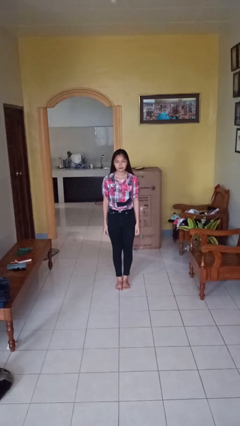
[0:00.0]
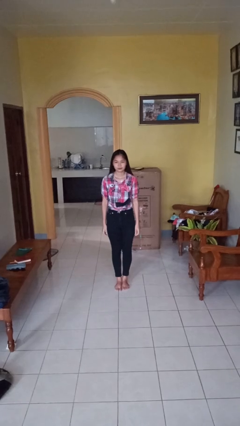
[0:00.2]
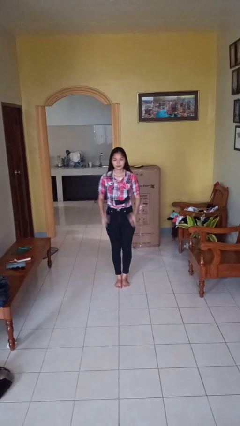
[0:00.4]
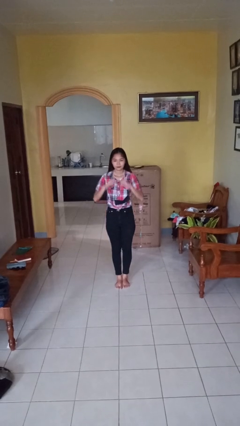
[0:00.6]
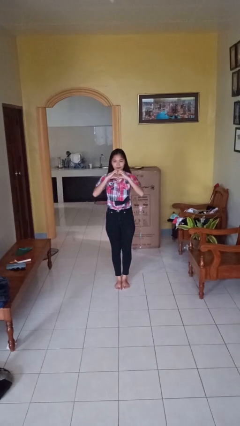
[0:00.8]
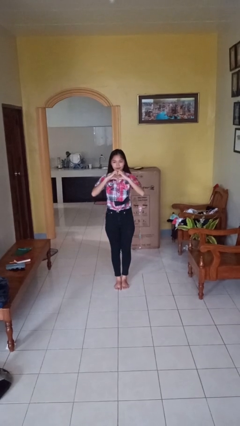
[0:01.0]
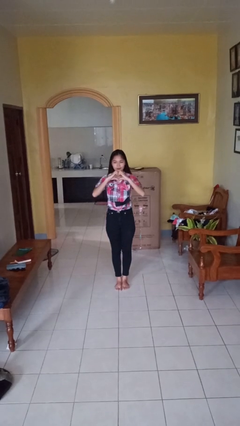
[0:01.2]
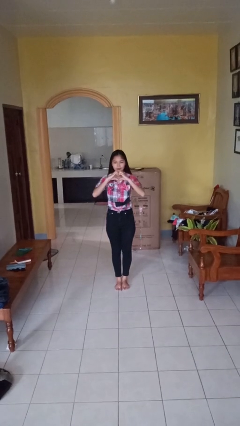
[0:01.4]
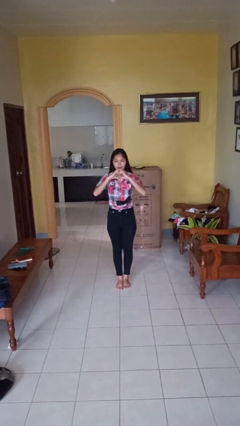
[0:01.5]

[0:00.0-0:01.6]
person gestures heart

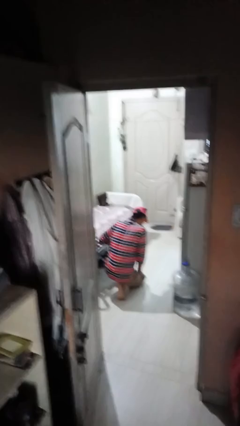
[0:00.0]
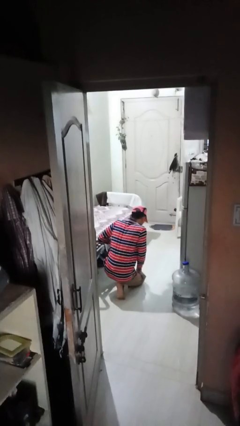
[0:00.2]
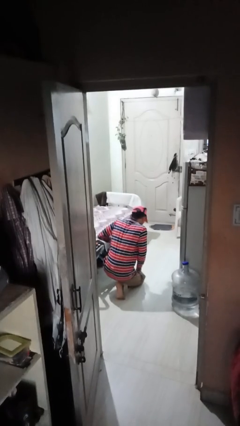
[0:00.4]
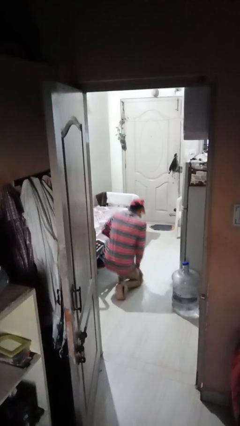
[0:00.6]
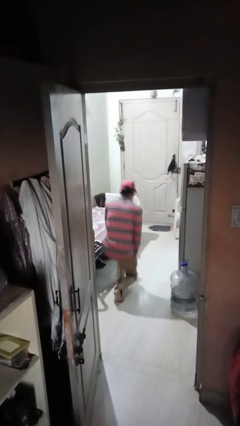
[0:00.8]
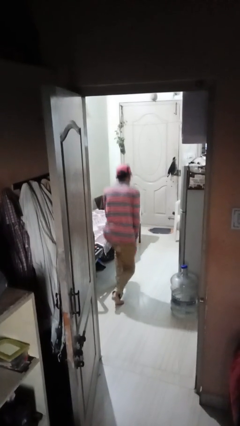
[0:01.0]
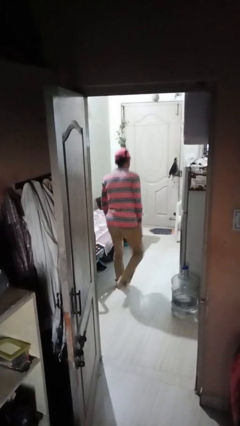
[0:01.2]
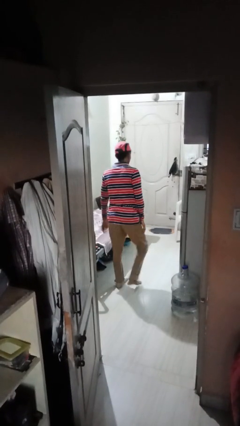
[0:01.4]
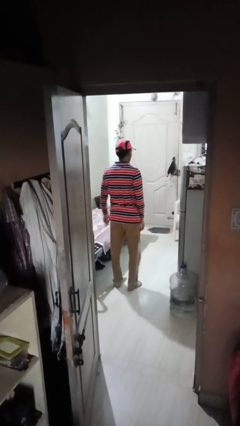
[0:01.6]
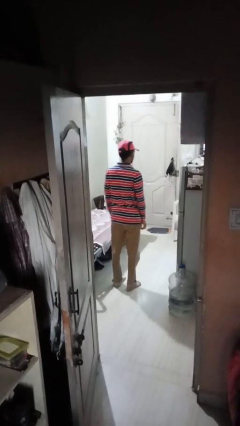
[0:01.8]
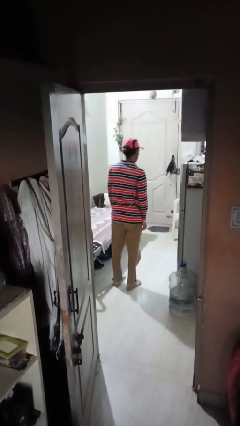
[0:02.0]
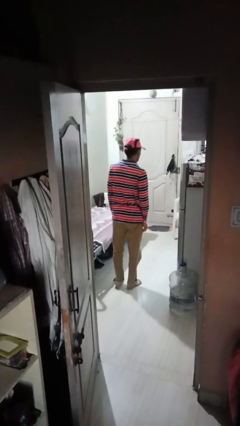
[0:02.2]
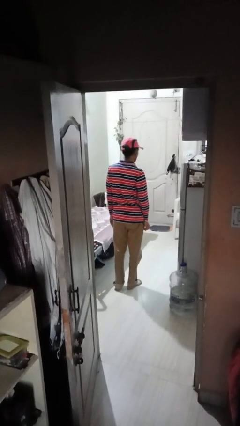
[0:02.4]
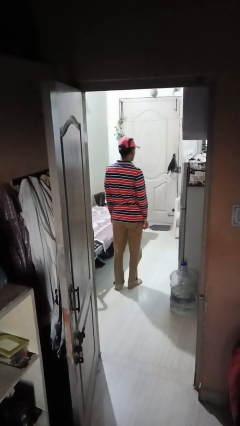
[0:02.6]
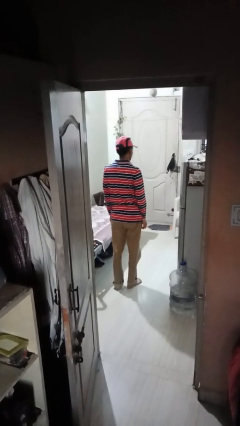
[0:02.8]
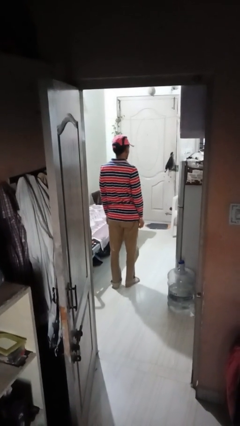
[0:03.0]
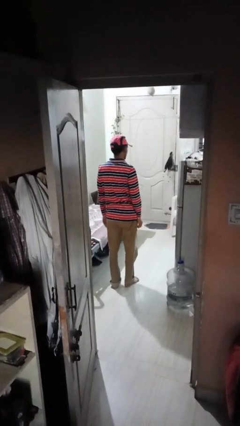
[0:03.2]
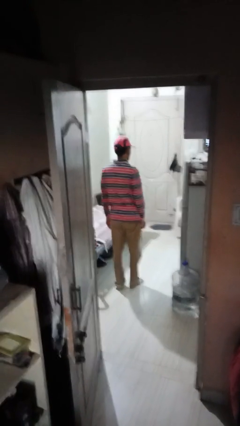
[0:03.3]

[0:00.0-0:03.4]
person stands up from floor

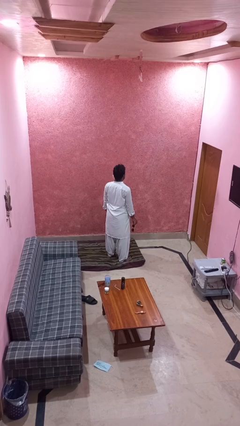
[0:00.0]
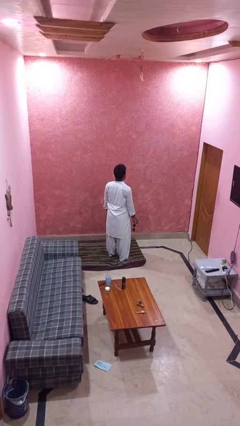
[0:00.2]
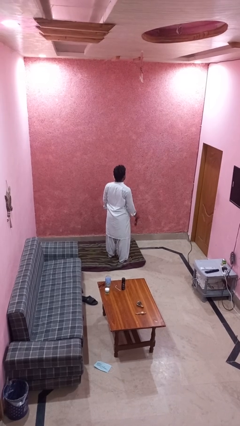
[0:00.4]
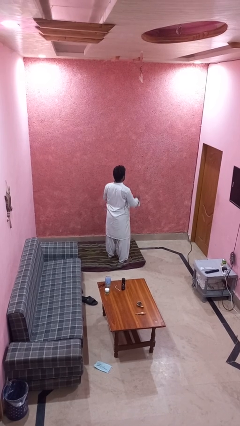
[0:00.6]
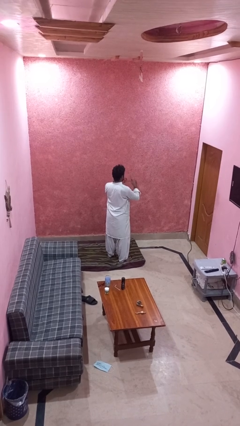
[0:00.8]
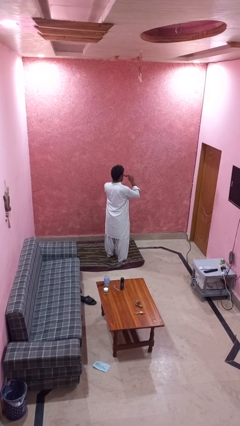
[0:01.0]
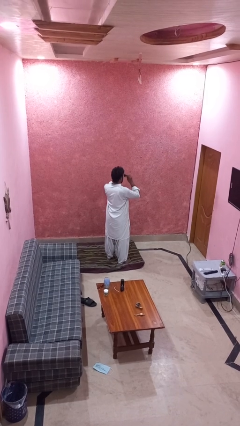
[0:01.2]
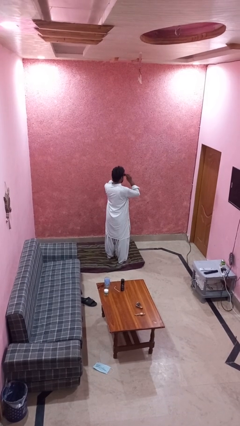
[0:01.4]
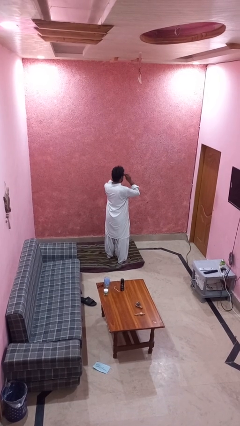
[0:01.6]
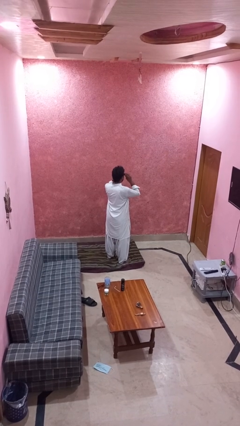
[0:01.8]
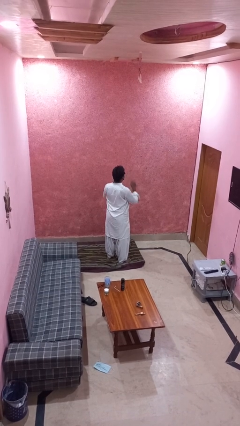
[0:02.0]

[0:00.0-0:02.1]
person puts on sunglasses

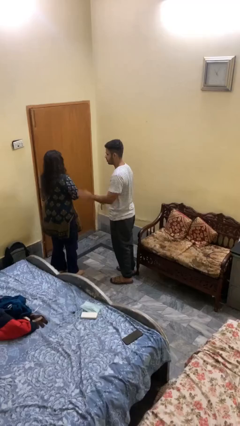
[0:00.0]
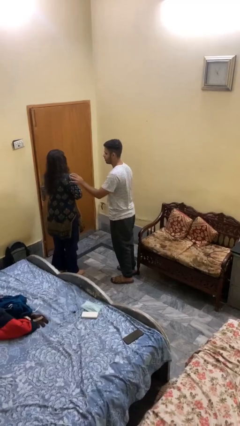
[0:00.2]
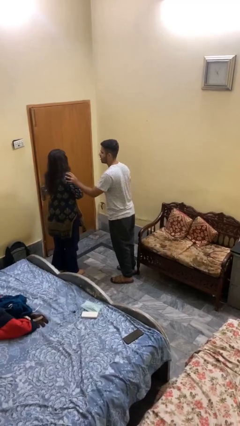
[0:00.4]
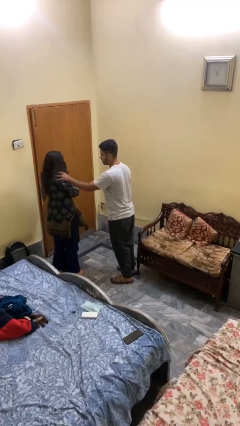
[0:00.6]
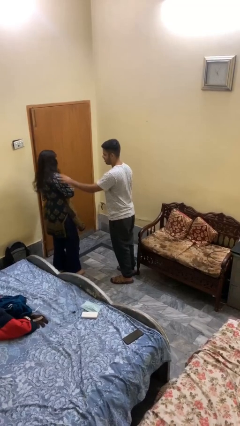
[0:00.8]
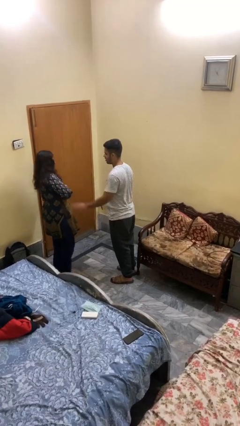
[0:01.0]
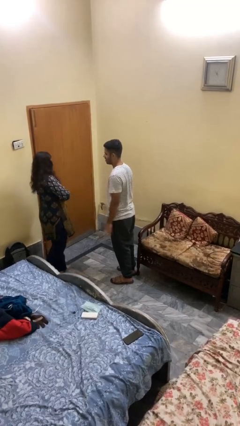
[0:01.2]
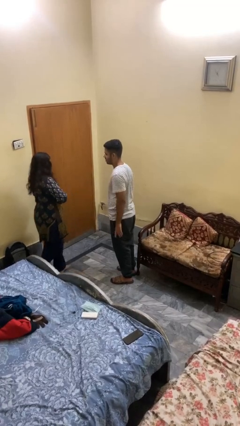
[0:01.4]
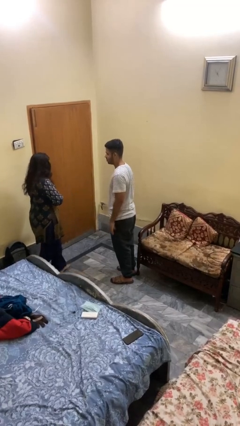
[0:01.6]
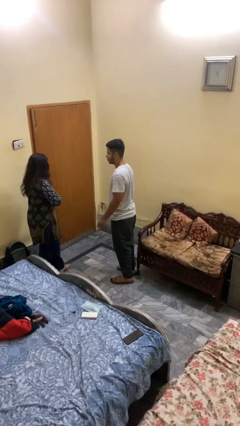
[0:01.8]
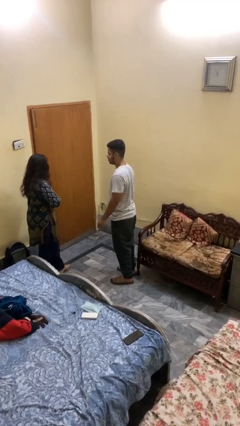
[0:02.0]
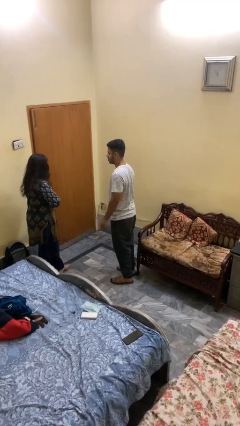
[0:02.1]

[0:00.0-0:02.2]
person shoves person

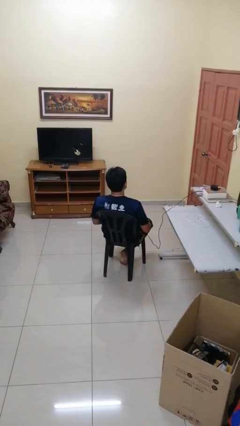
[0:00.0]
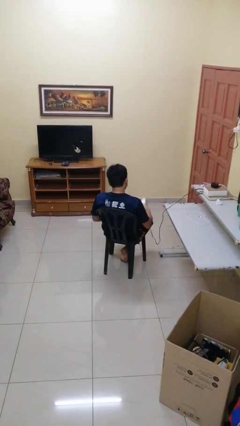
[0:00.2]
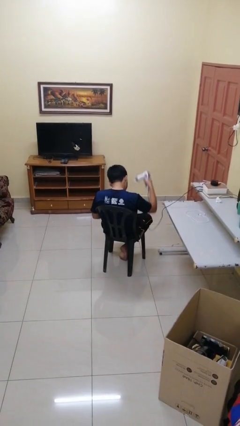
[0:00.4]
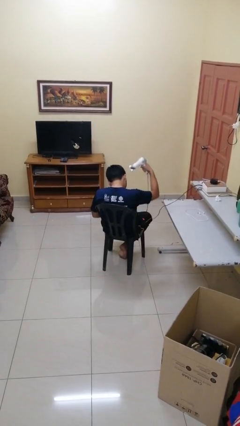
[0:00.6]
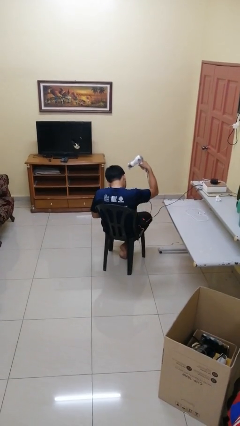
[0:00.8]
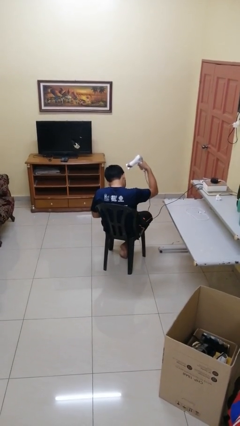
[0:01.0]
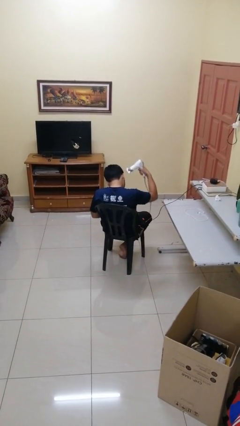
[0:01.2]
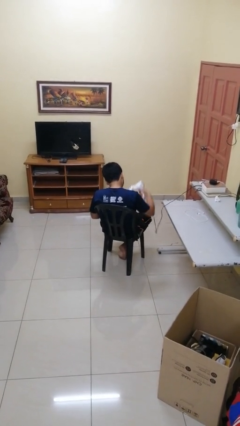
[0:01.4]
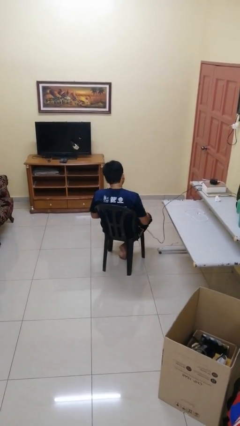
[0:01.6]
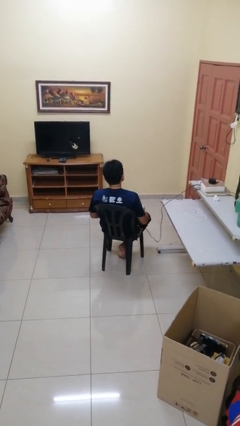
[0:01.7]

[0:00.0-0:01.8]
person dries hair with hairdryer

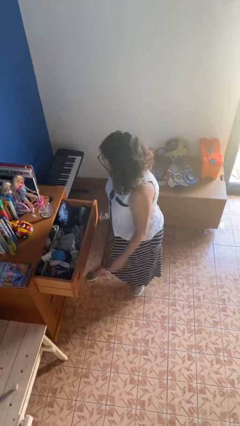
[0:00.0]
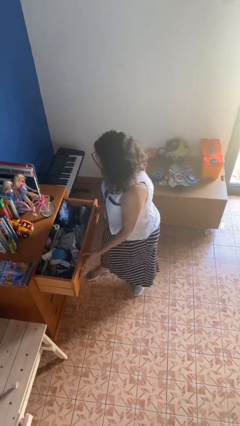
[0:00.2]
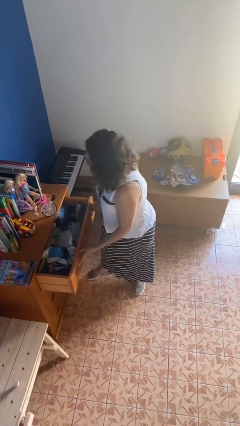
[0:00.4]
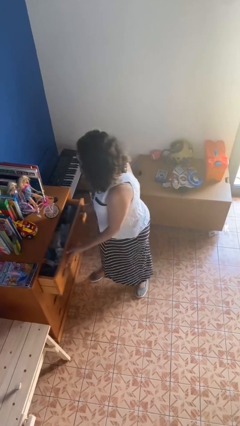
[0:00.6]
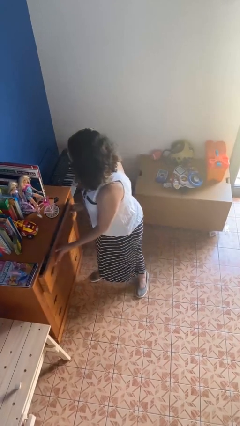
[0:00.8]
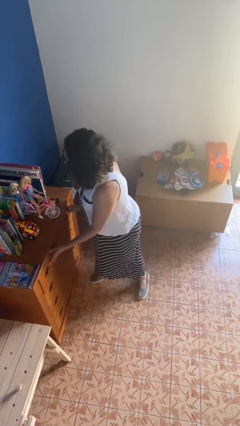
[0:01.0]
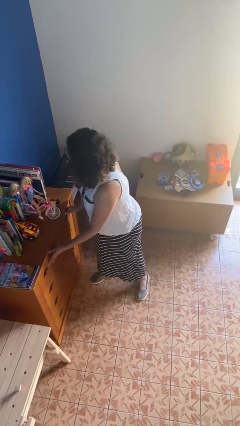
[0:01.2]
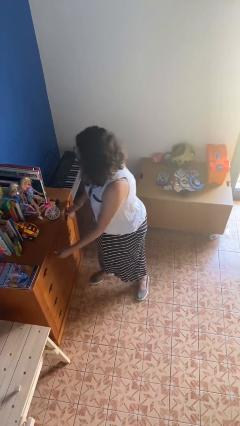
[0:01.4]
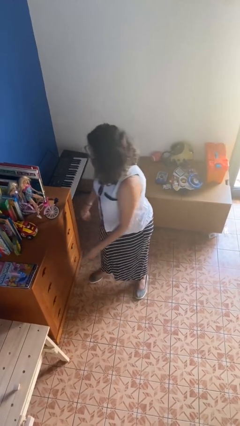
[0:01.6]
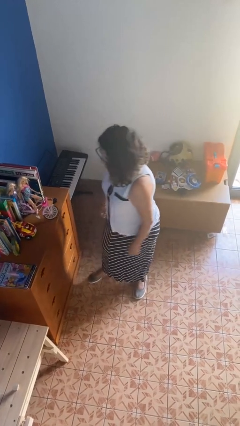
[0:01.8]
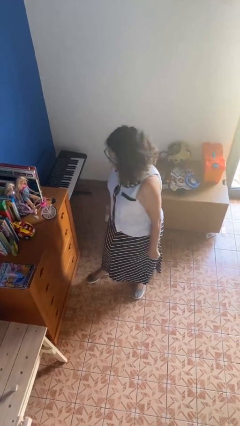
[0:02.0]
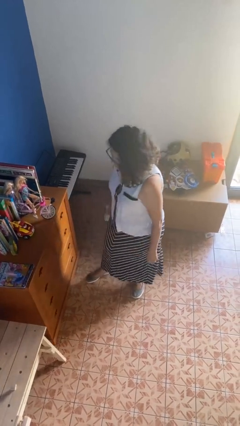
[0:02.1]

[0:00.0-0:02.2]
person closes dresser drawer

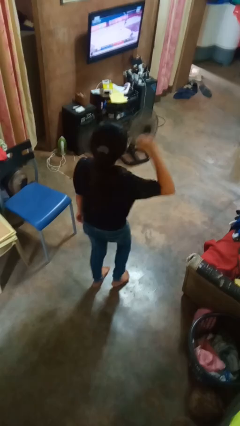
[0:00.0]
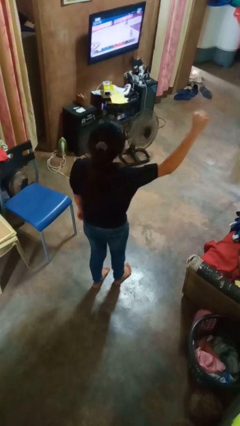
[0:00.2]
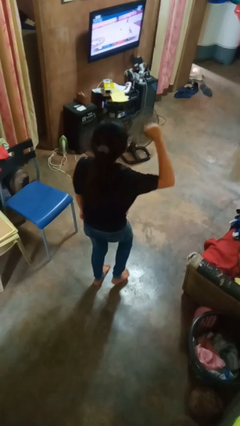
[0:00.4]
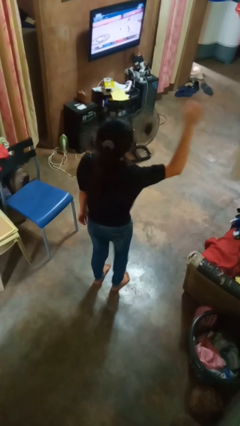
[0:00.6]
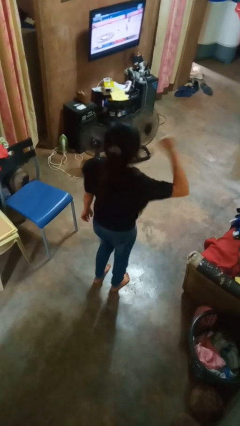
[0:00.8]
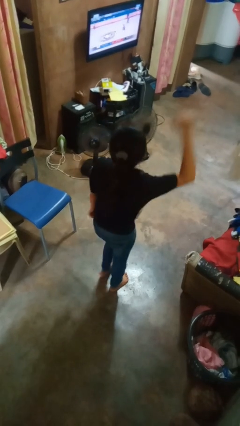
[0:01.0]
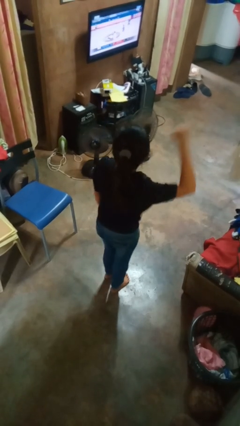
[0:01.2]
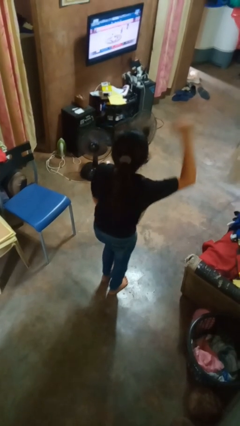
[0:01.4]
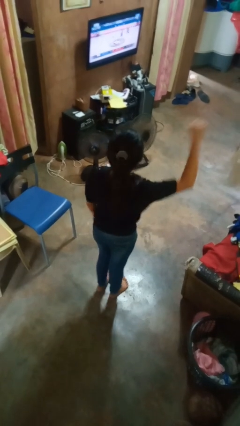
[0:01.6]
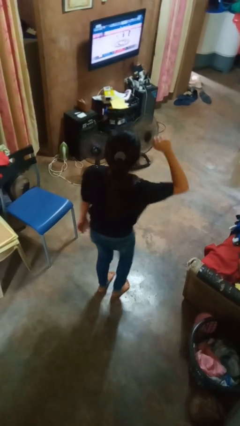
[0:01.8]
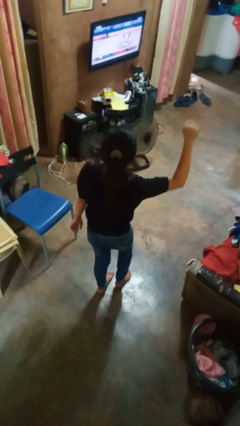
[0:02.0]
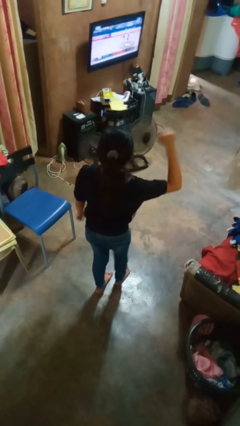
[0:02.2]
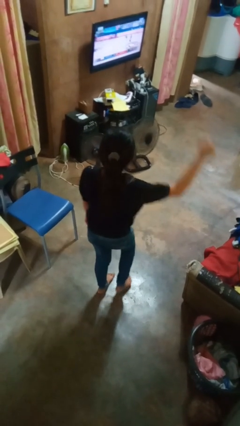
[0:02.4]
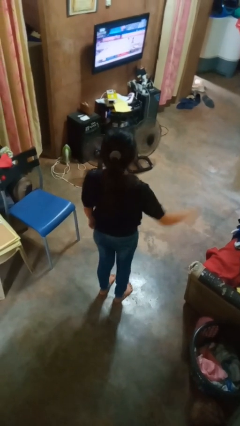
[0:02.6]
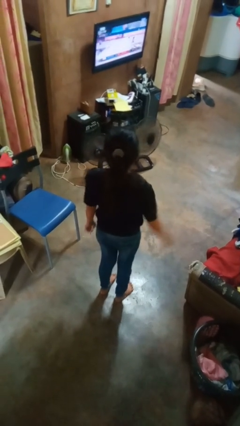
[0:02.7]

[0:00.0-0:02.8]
person dances in place

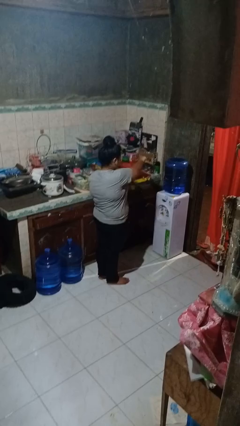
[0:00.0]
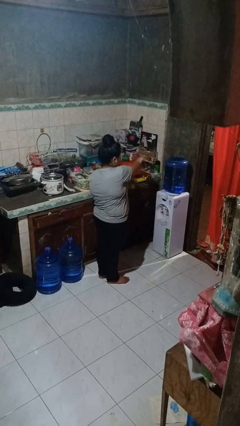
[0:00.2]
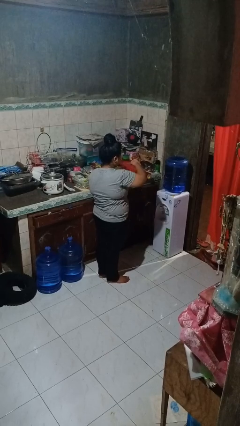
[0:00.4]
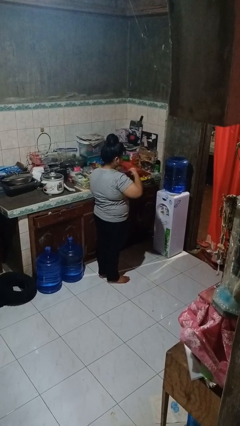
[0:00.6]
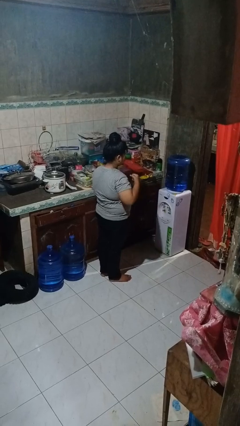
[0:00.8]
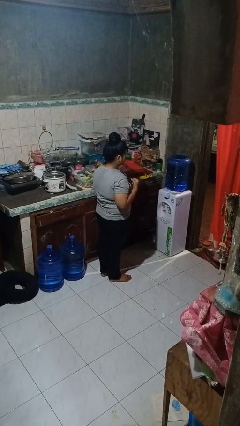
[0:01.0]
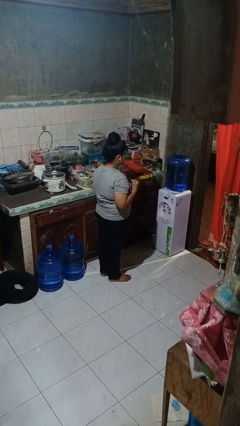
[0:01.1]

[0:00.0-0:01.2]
person punches
